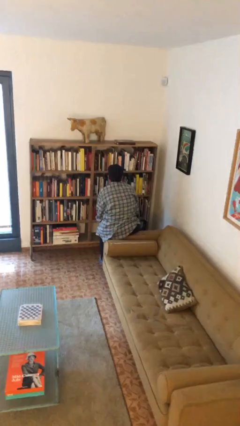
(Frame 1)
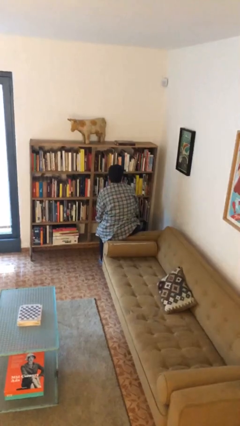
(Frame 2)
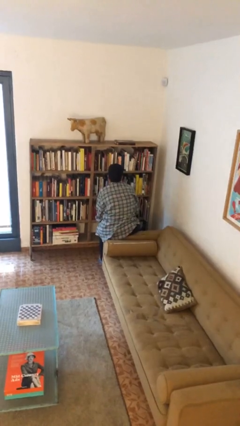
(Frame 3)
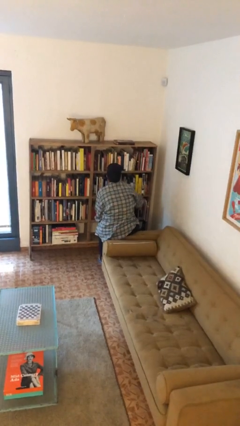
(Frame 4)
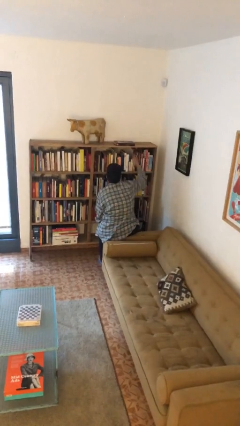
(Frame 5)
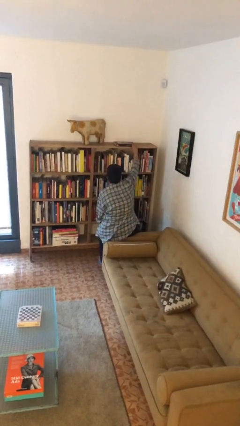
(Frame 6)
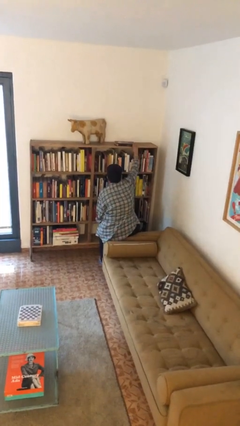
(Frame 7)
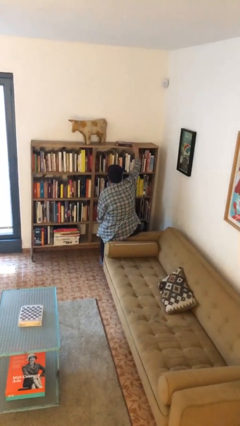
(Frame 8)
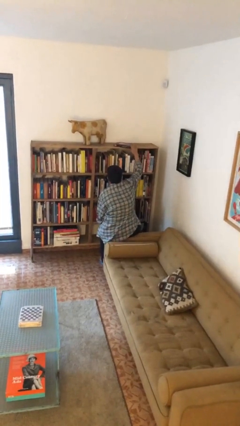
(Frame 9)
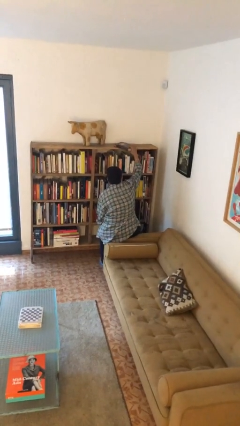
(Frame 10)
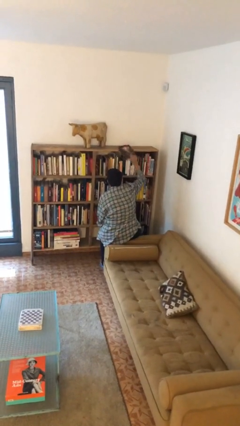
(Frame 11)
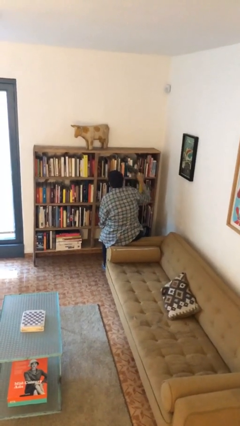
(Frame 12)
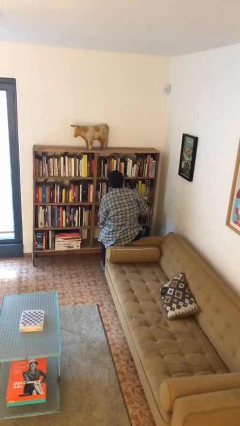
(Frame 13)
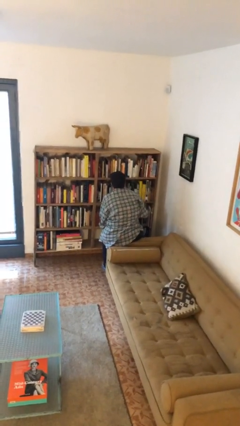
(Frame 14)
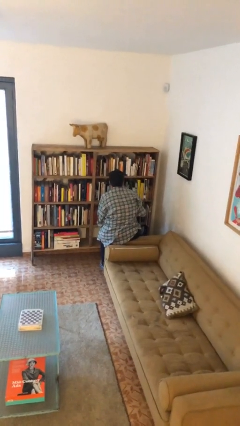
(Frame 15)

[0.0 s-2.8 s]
person picks up object from shelf

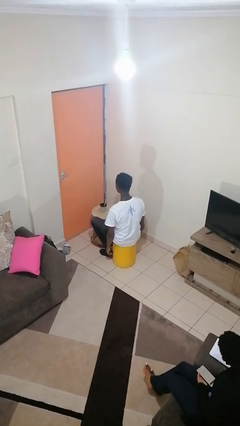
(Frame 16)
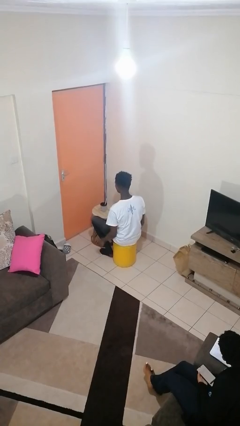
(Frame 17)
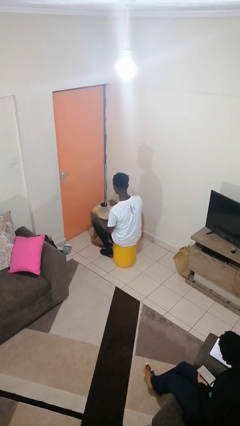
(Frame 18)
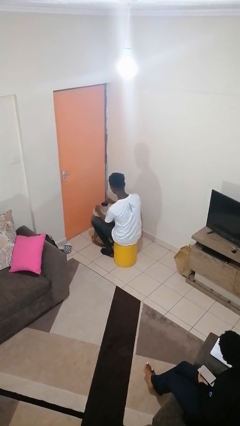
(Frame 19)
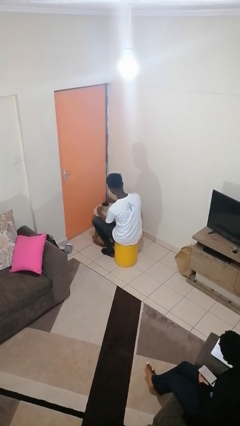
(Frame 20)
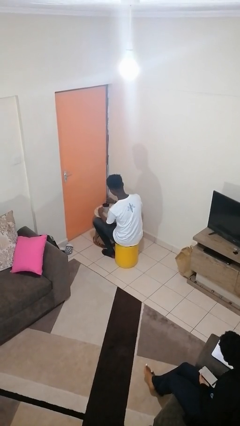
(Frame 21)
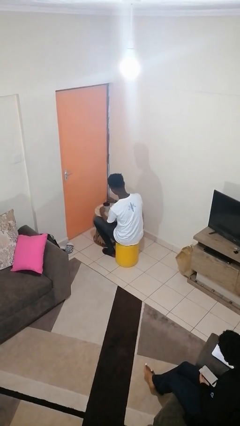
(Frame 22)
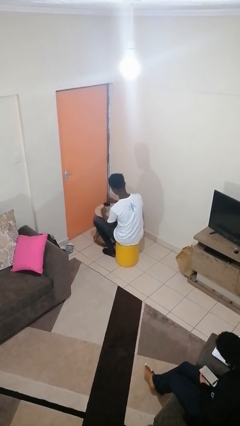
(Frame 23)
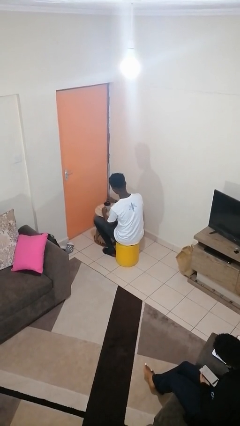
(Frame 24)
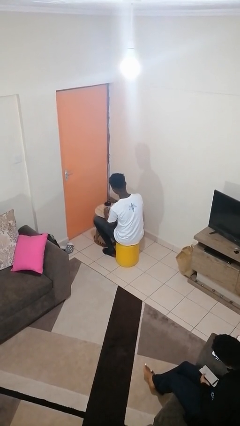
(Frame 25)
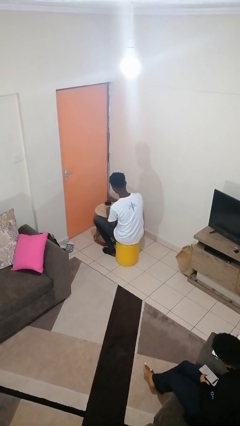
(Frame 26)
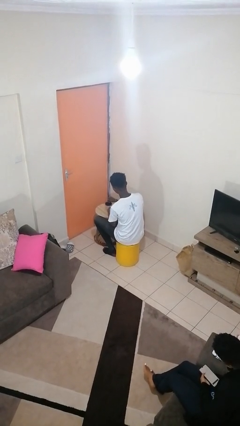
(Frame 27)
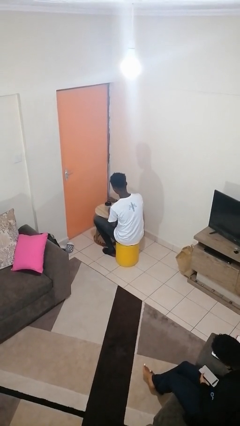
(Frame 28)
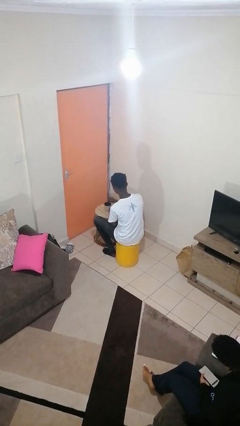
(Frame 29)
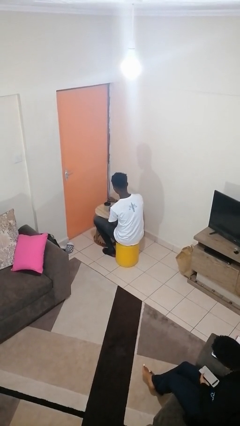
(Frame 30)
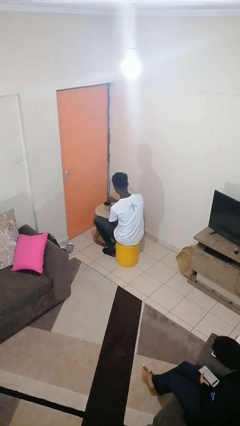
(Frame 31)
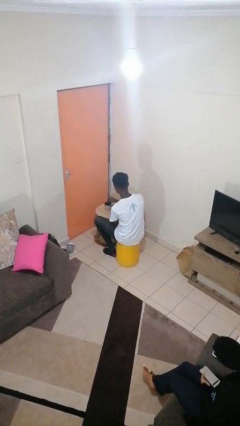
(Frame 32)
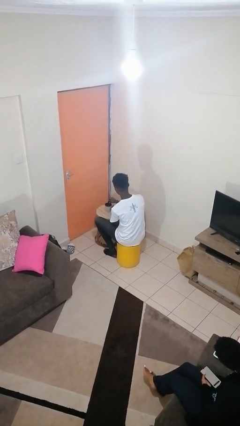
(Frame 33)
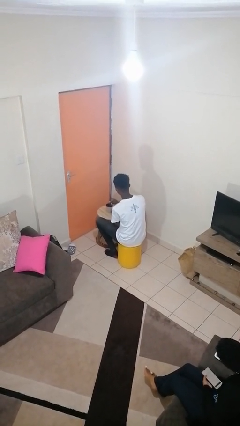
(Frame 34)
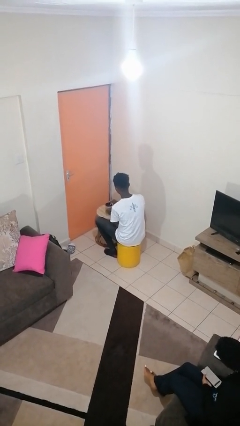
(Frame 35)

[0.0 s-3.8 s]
person stirs mug

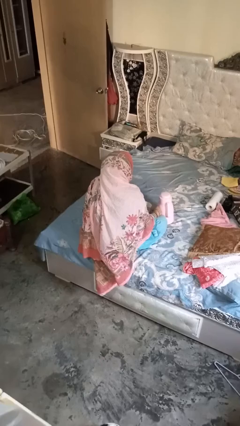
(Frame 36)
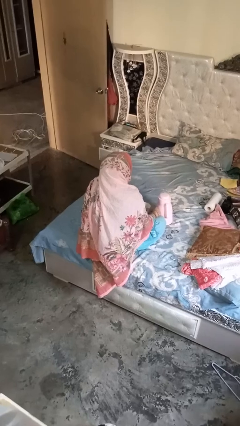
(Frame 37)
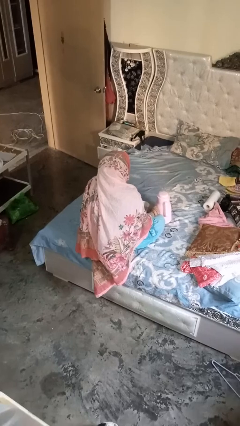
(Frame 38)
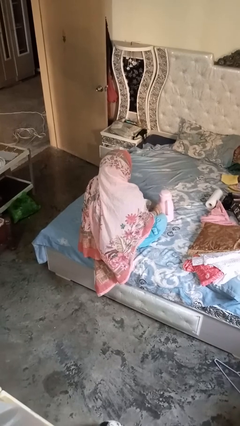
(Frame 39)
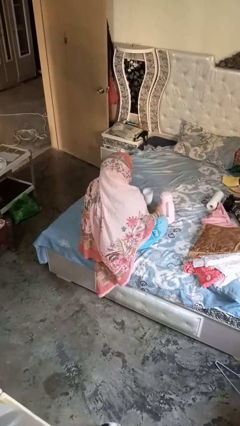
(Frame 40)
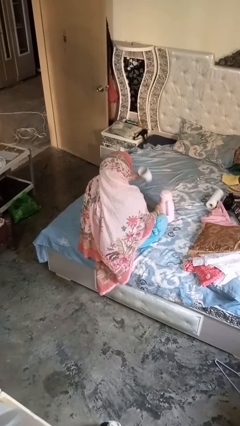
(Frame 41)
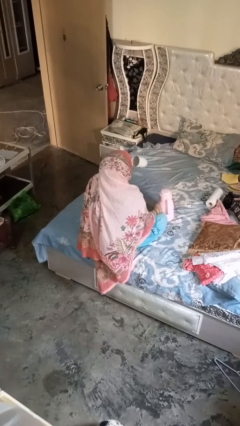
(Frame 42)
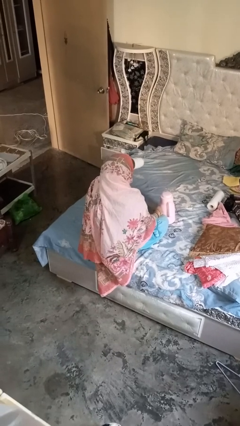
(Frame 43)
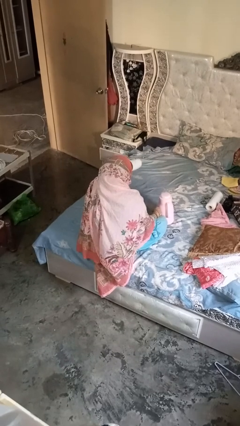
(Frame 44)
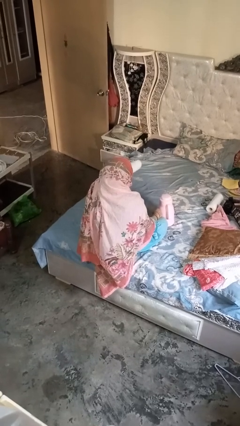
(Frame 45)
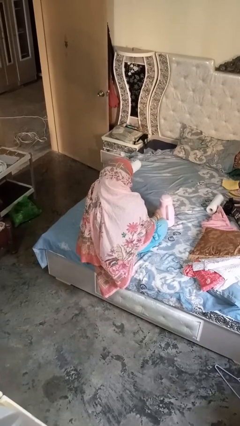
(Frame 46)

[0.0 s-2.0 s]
person pours coffee into mug

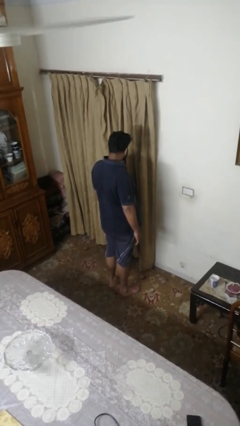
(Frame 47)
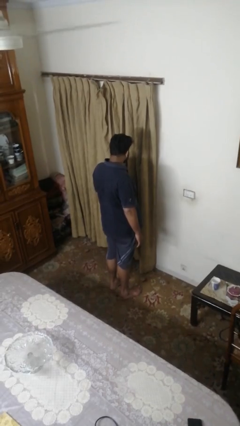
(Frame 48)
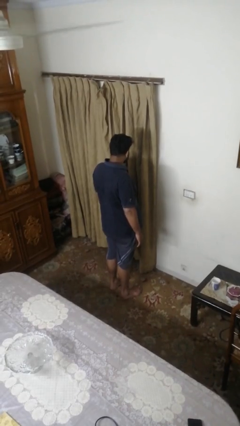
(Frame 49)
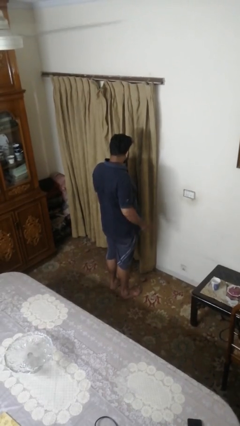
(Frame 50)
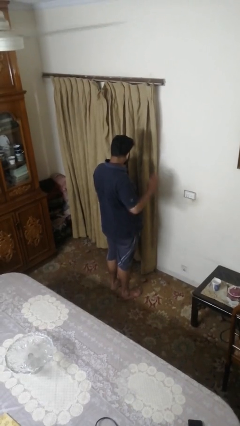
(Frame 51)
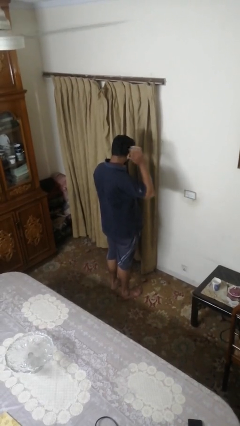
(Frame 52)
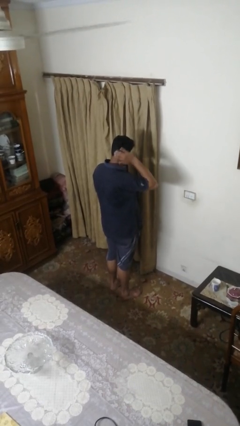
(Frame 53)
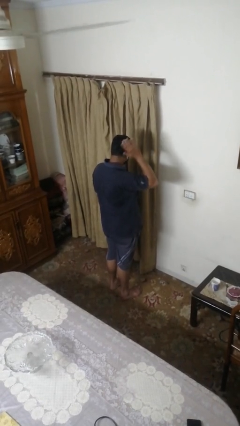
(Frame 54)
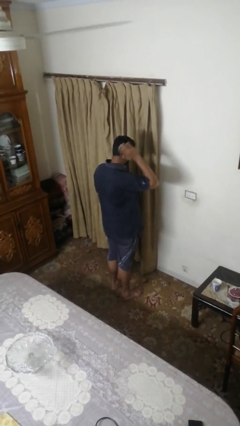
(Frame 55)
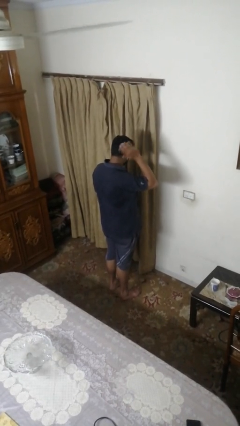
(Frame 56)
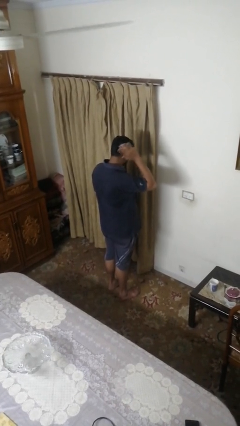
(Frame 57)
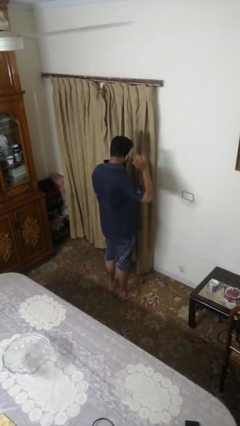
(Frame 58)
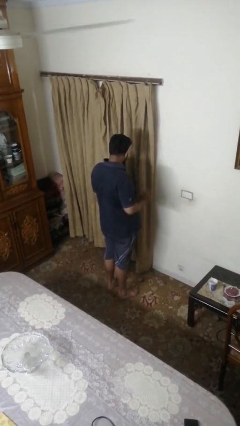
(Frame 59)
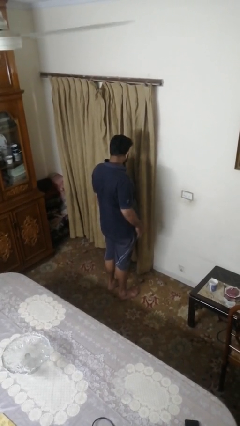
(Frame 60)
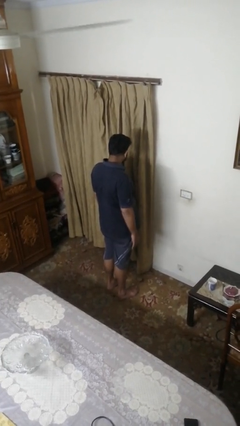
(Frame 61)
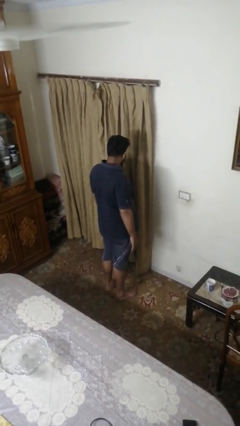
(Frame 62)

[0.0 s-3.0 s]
person strokes hair

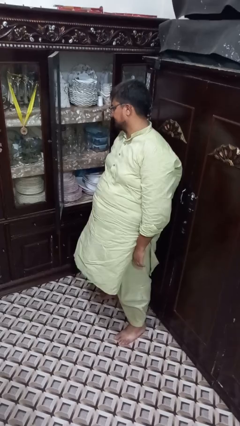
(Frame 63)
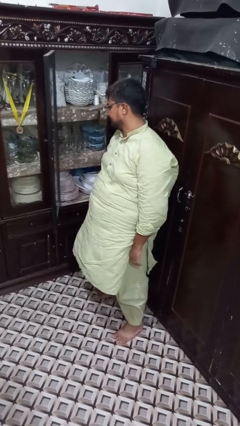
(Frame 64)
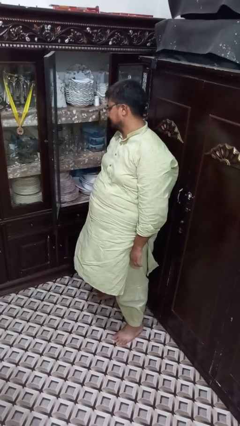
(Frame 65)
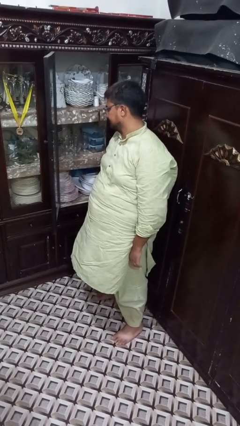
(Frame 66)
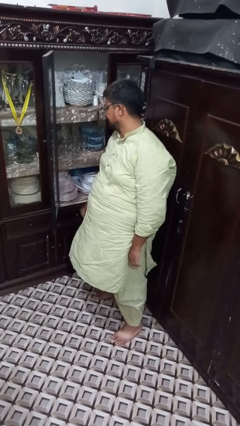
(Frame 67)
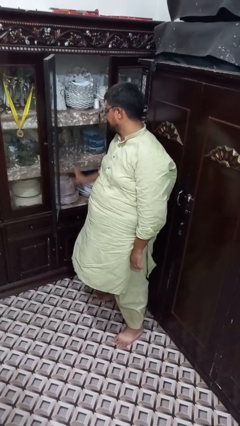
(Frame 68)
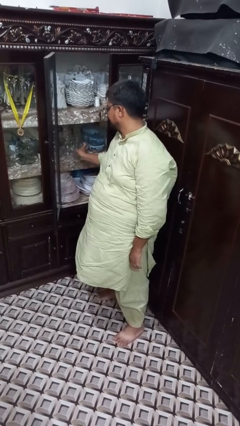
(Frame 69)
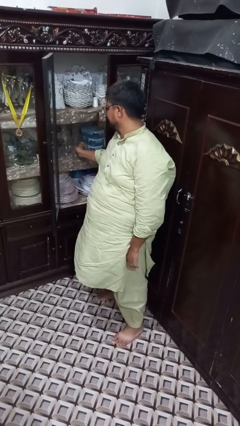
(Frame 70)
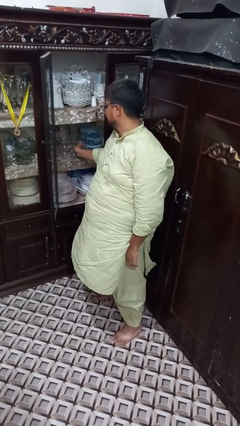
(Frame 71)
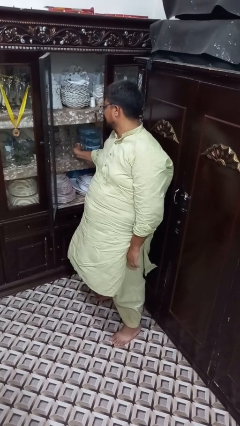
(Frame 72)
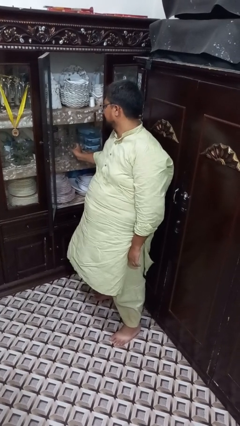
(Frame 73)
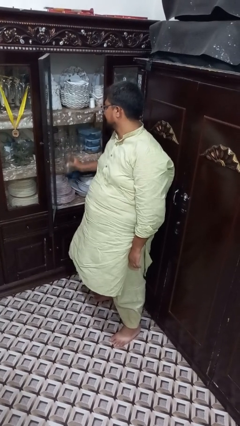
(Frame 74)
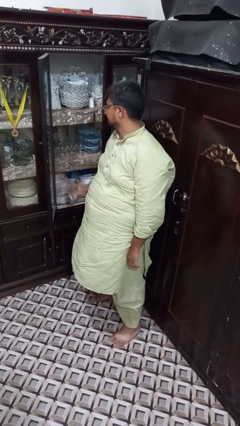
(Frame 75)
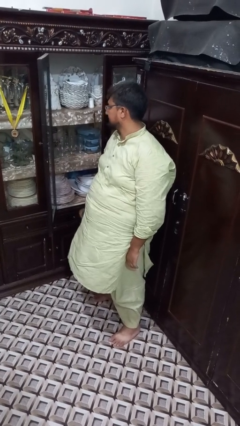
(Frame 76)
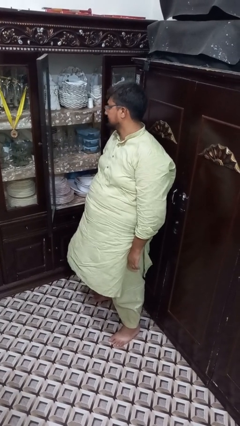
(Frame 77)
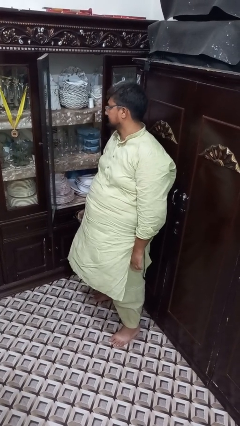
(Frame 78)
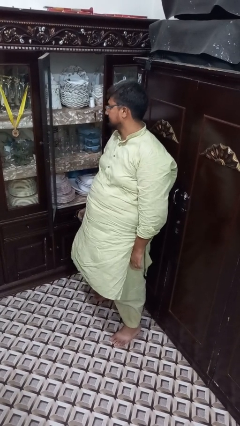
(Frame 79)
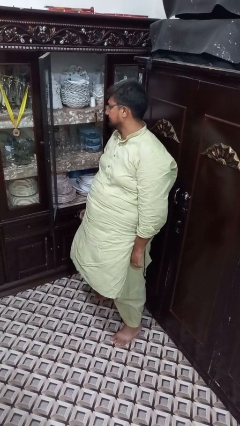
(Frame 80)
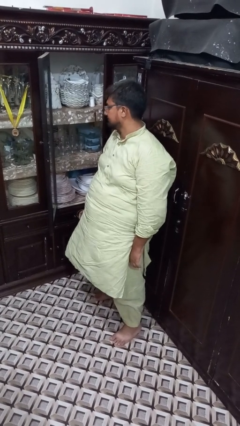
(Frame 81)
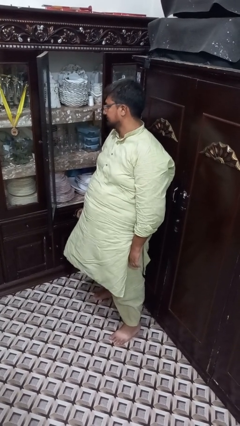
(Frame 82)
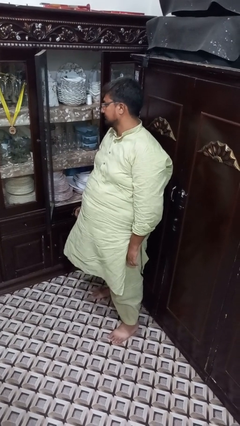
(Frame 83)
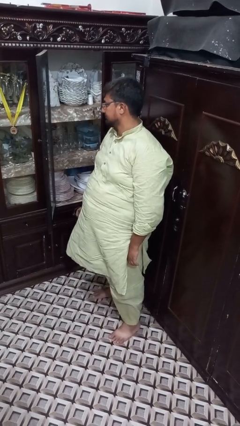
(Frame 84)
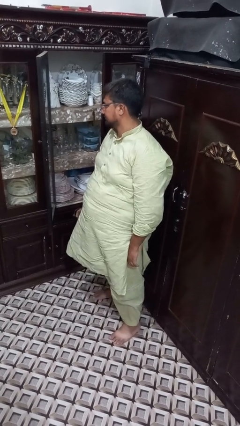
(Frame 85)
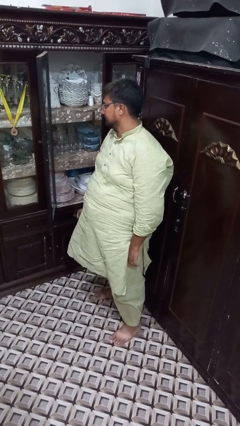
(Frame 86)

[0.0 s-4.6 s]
person picks up object from countertop

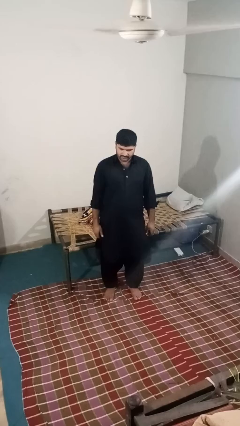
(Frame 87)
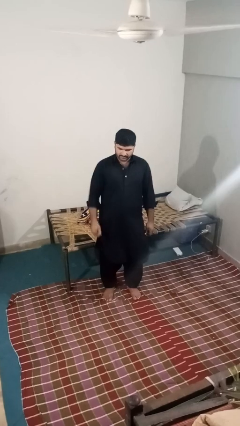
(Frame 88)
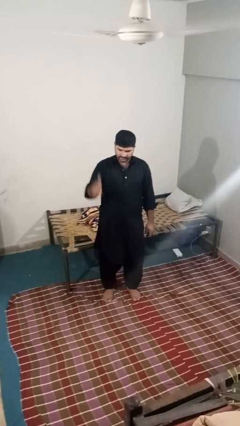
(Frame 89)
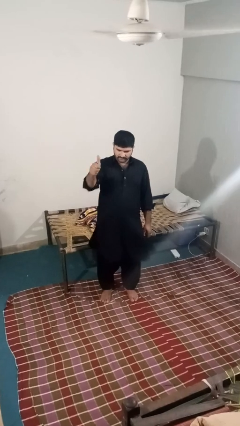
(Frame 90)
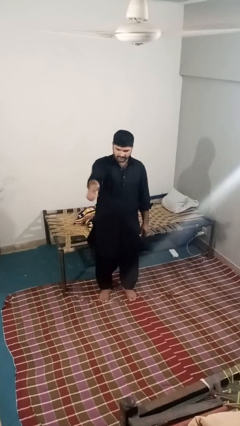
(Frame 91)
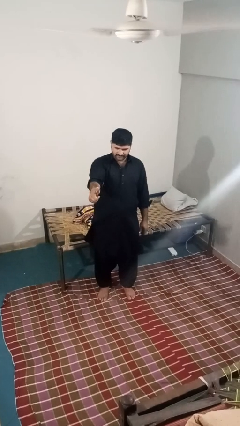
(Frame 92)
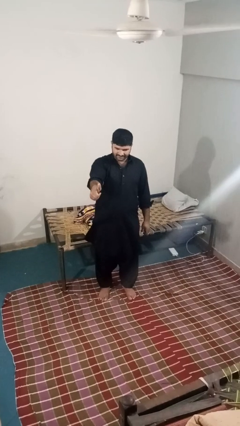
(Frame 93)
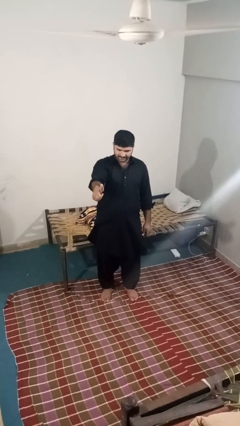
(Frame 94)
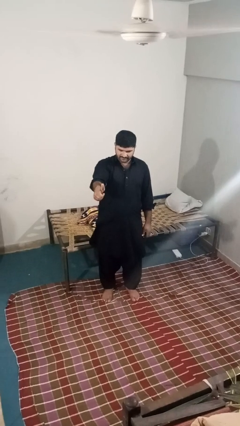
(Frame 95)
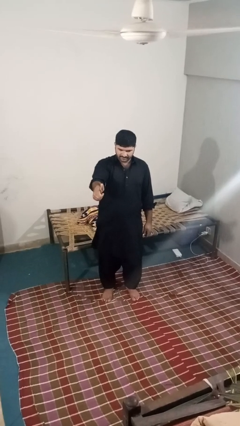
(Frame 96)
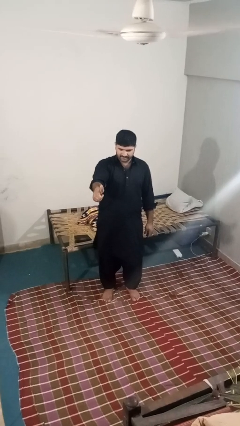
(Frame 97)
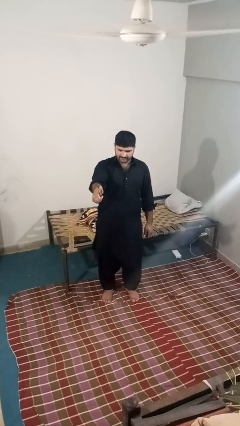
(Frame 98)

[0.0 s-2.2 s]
person gestures thumbs up
